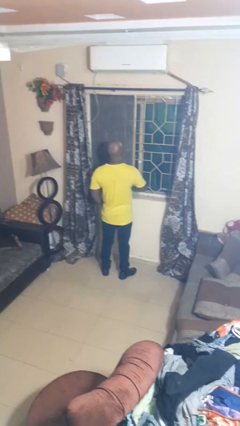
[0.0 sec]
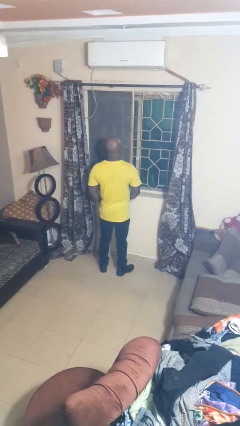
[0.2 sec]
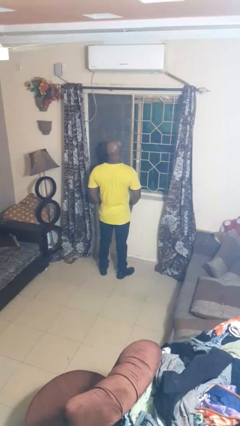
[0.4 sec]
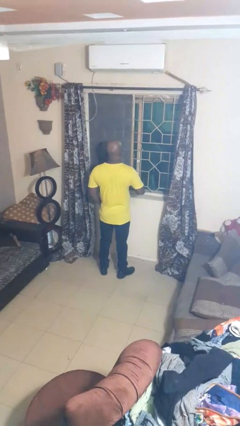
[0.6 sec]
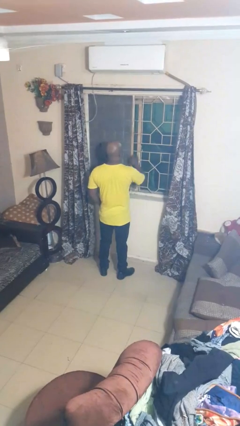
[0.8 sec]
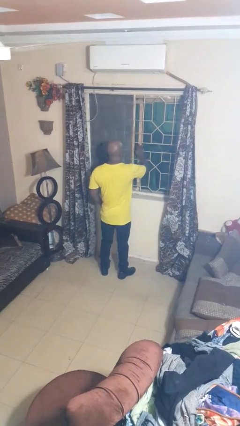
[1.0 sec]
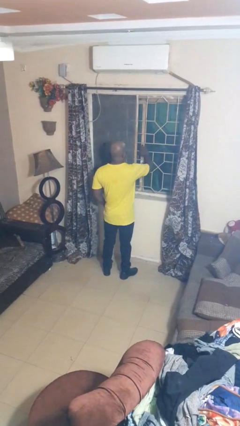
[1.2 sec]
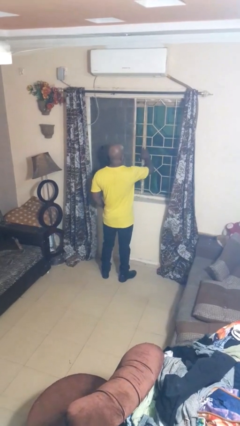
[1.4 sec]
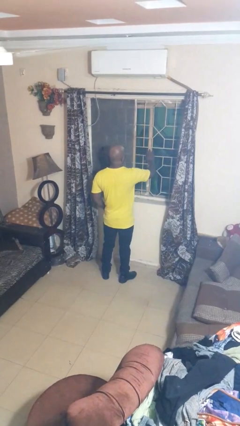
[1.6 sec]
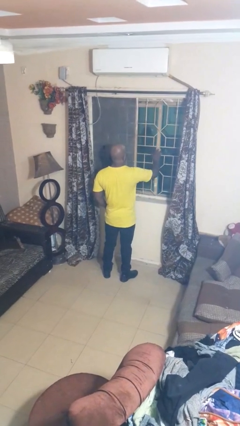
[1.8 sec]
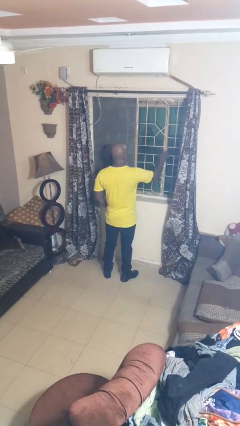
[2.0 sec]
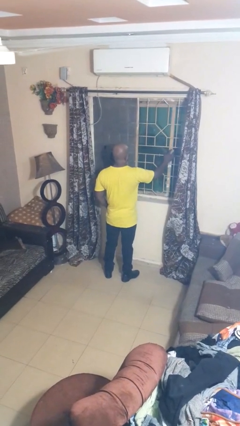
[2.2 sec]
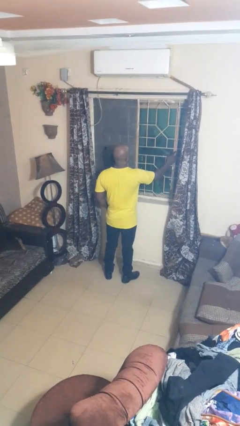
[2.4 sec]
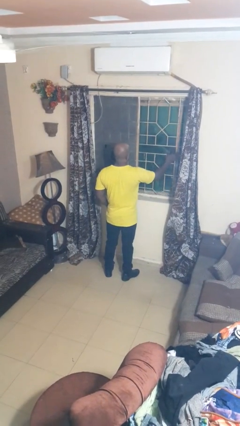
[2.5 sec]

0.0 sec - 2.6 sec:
person opens home window

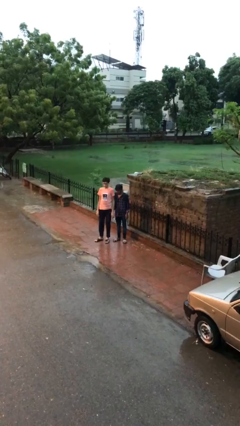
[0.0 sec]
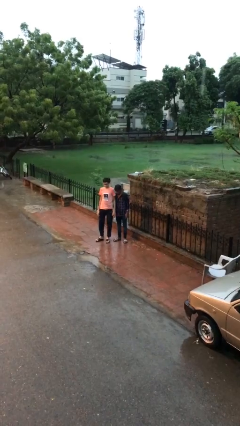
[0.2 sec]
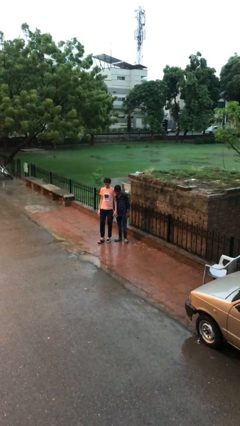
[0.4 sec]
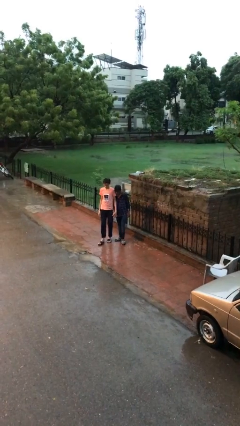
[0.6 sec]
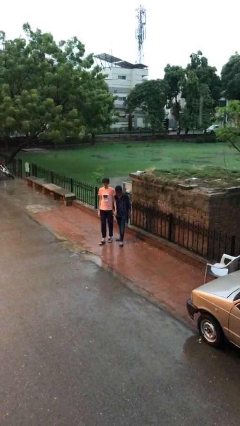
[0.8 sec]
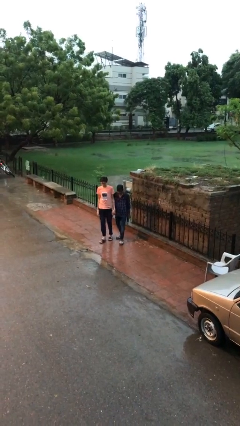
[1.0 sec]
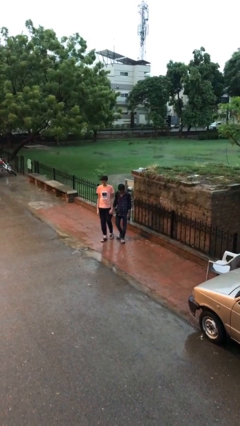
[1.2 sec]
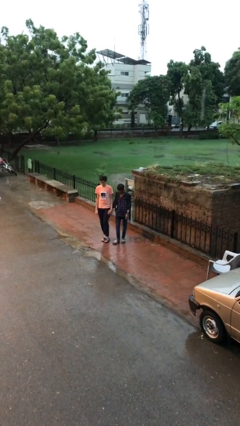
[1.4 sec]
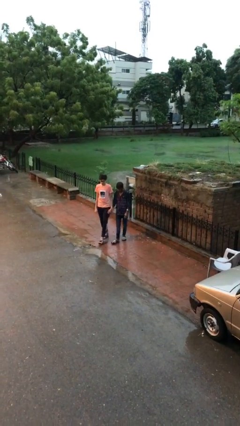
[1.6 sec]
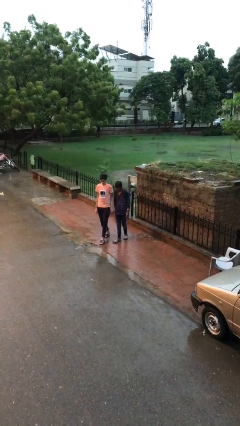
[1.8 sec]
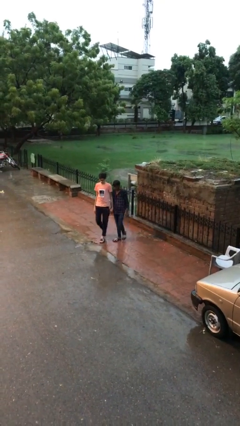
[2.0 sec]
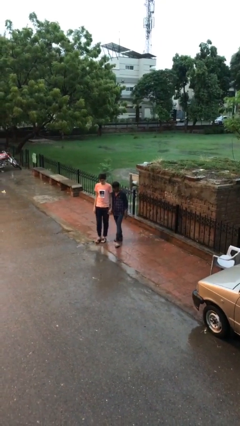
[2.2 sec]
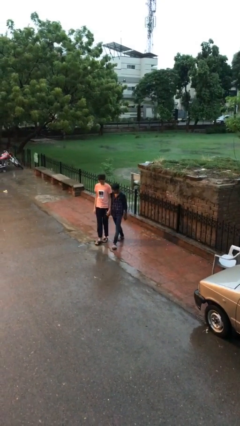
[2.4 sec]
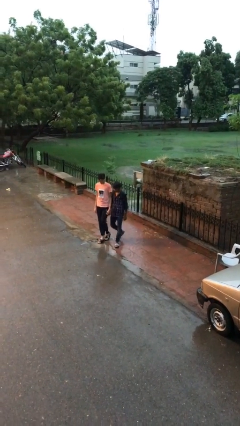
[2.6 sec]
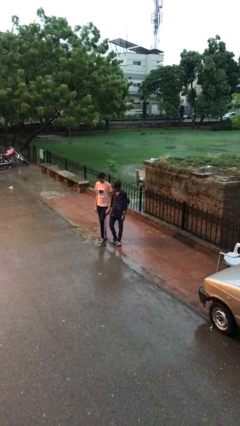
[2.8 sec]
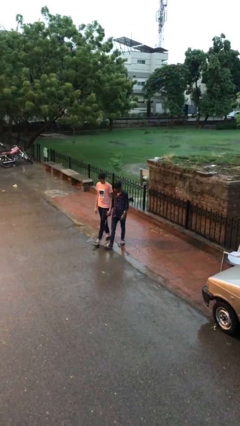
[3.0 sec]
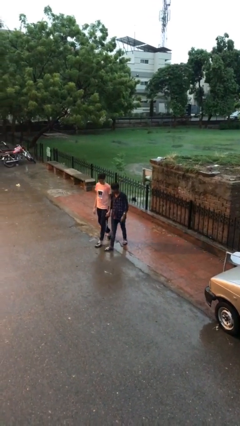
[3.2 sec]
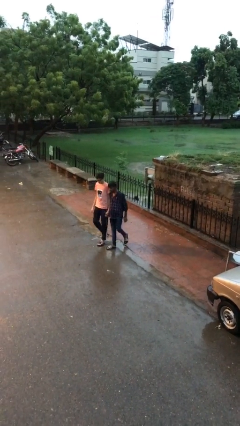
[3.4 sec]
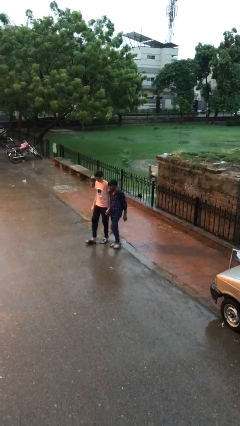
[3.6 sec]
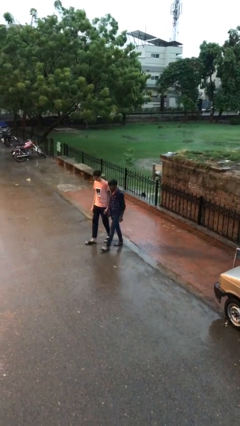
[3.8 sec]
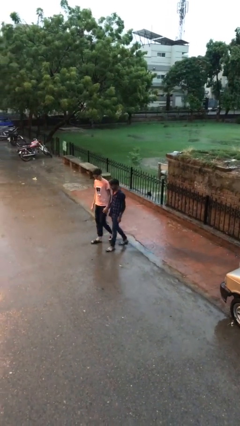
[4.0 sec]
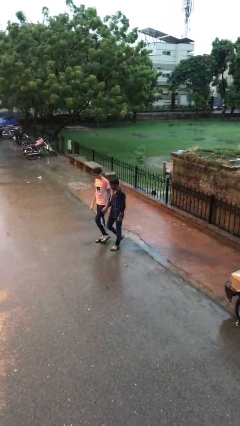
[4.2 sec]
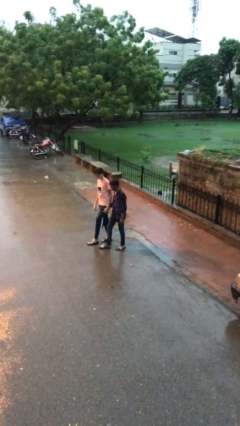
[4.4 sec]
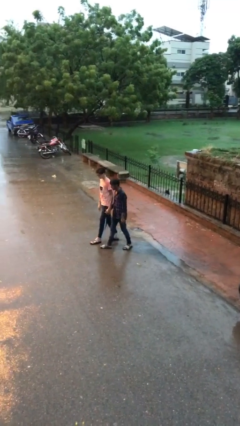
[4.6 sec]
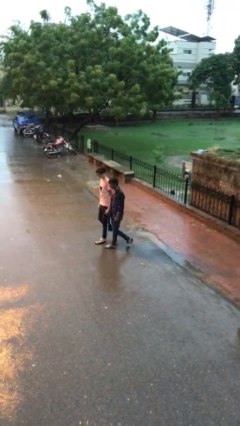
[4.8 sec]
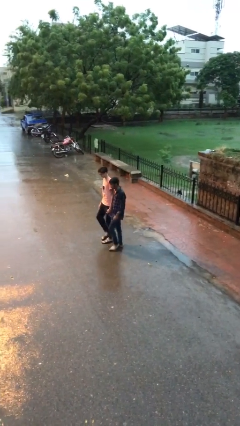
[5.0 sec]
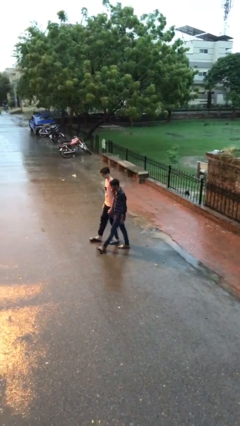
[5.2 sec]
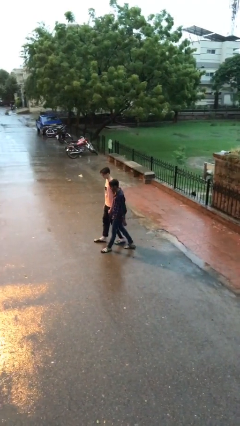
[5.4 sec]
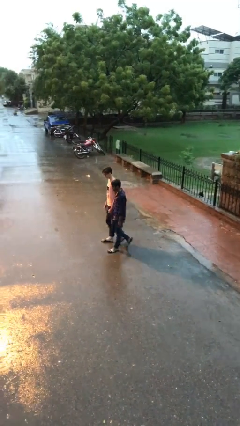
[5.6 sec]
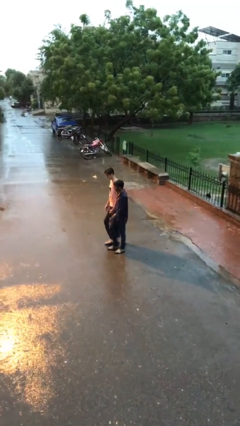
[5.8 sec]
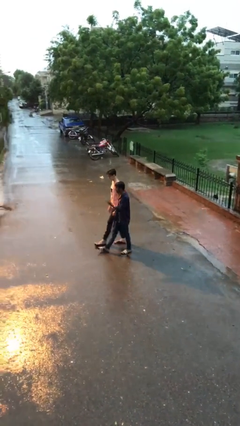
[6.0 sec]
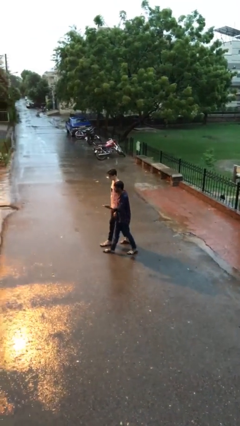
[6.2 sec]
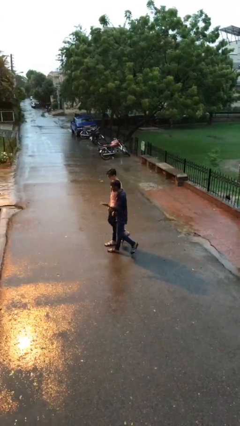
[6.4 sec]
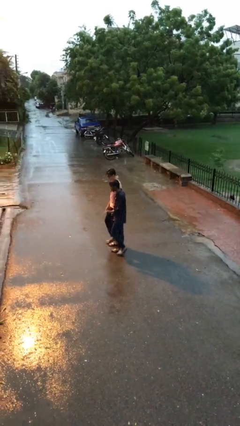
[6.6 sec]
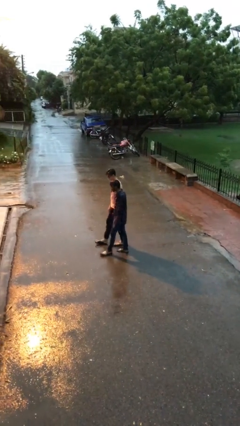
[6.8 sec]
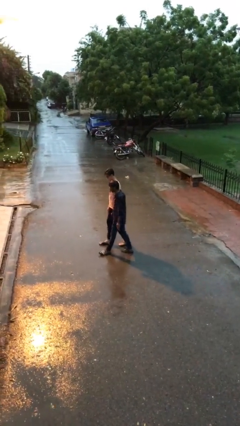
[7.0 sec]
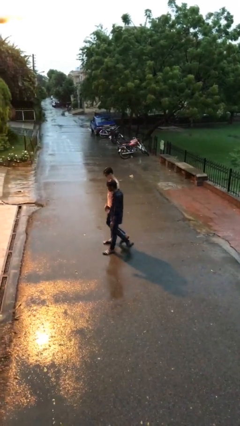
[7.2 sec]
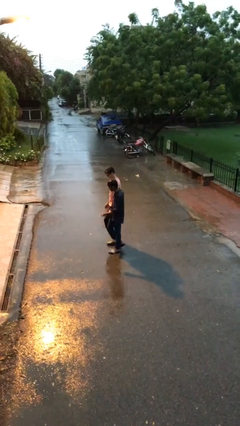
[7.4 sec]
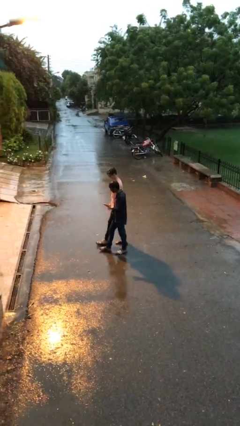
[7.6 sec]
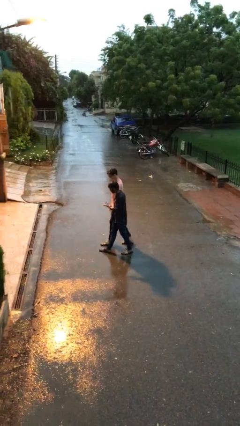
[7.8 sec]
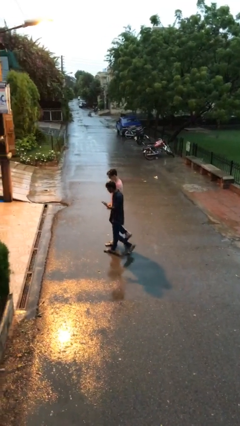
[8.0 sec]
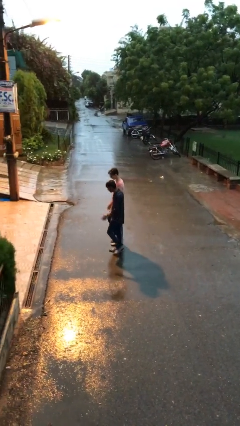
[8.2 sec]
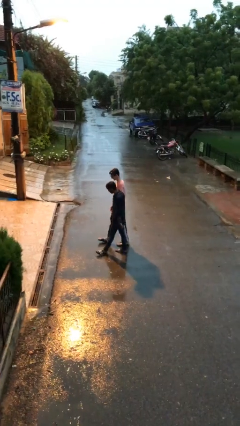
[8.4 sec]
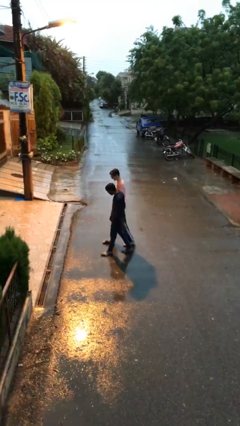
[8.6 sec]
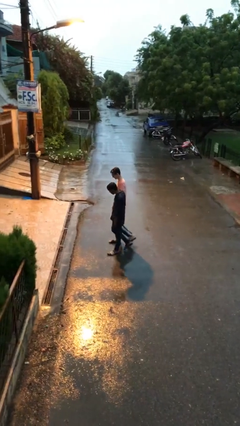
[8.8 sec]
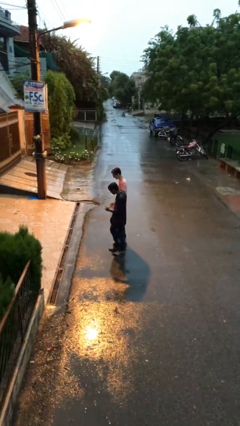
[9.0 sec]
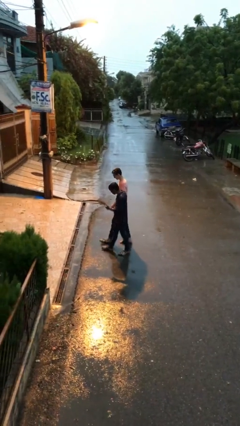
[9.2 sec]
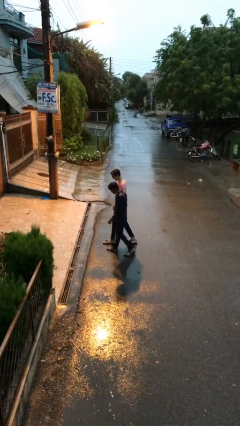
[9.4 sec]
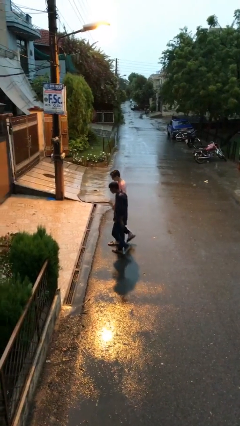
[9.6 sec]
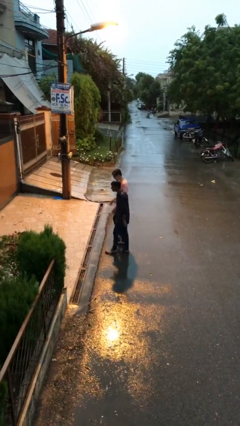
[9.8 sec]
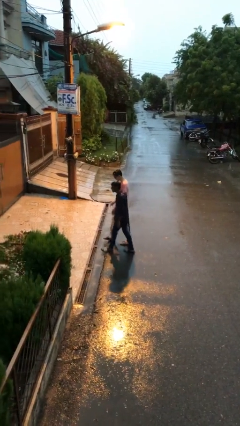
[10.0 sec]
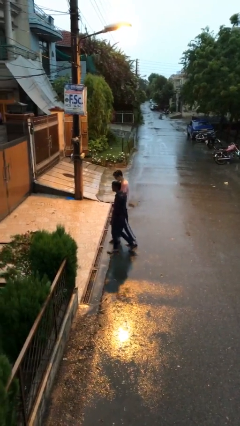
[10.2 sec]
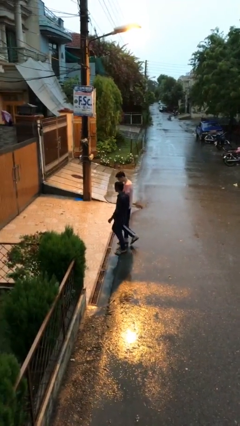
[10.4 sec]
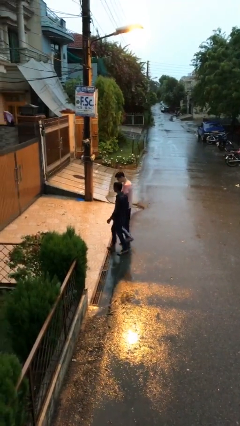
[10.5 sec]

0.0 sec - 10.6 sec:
person holds hand

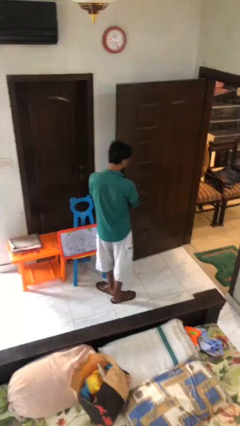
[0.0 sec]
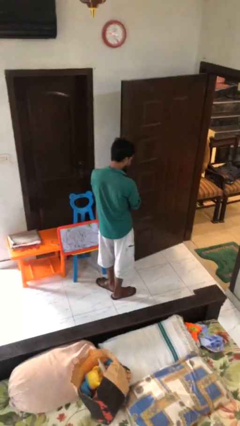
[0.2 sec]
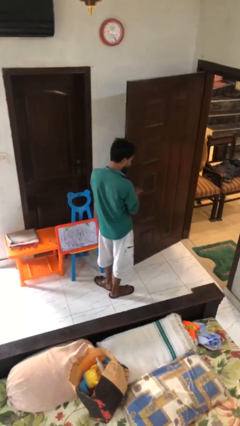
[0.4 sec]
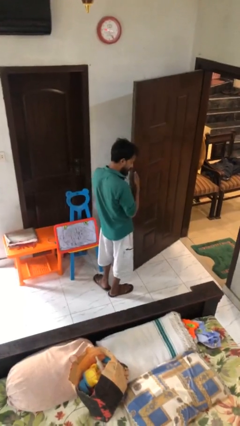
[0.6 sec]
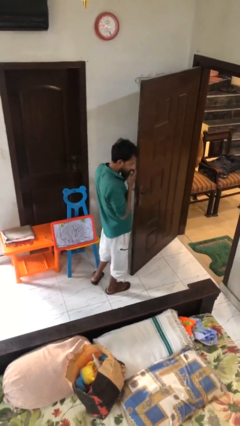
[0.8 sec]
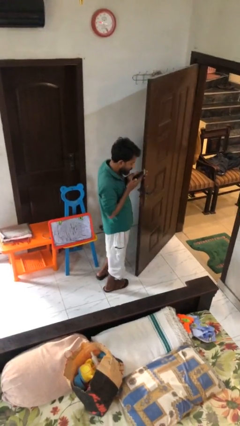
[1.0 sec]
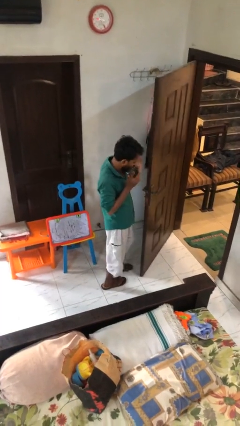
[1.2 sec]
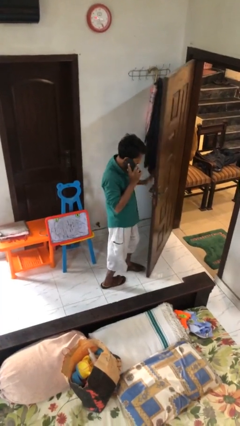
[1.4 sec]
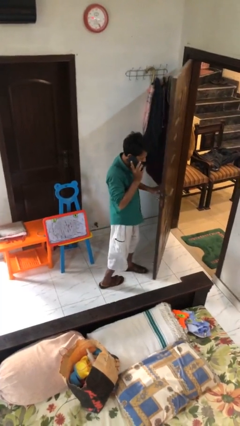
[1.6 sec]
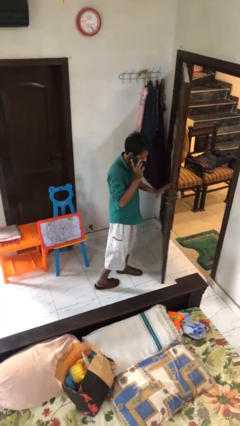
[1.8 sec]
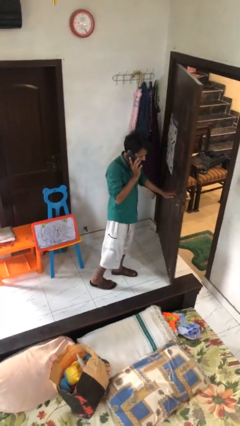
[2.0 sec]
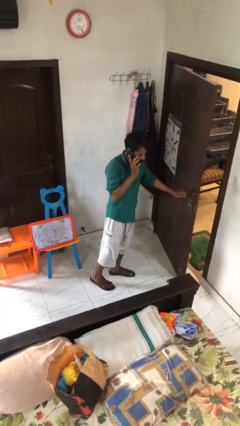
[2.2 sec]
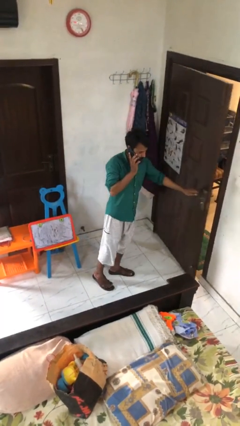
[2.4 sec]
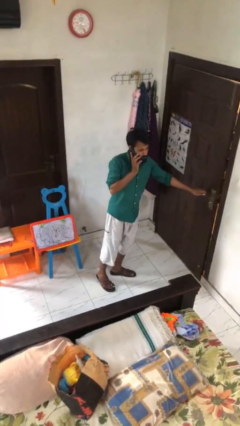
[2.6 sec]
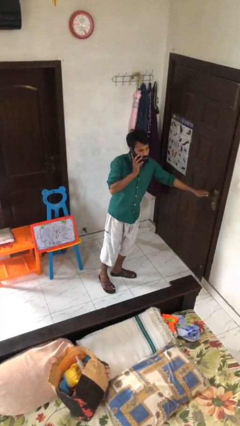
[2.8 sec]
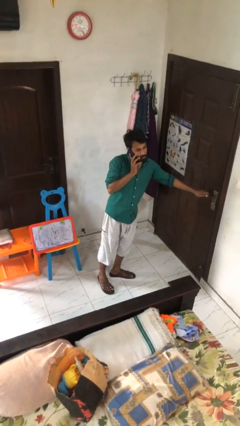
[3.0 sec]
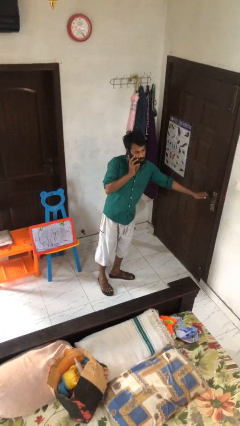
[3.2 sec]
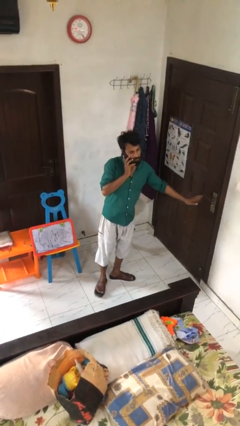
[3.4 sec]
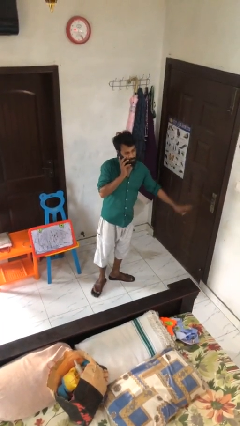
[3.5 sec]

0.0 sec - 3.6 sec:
person closes facility door

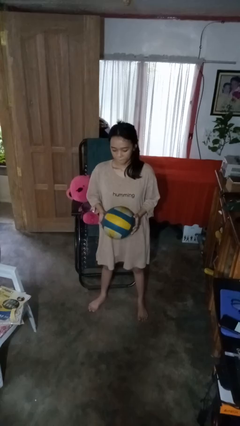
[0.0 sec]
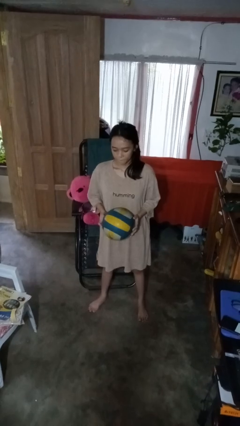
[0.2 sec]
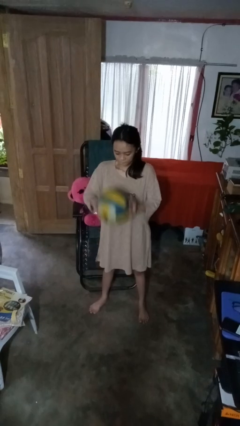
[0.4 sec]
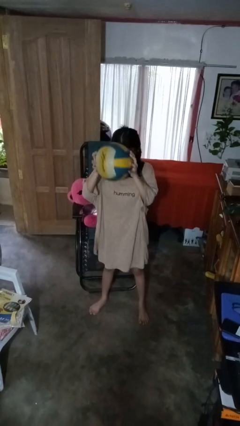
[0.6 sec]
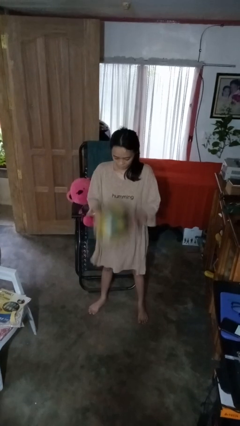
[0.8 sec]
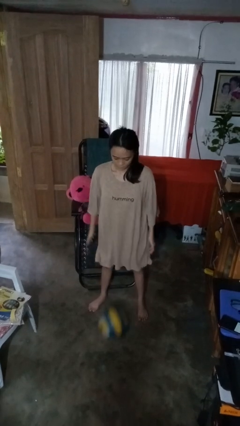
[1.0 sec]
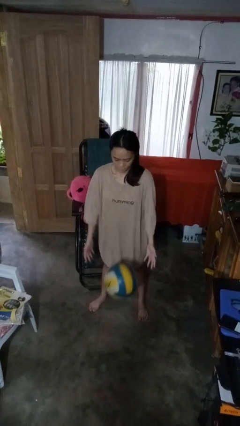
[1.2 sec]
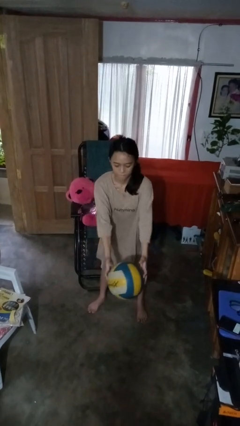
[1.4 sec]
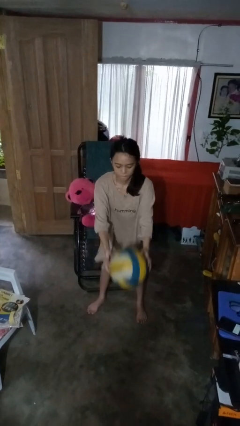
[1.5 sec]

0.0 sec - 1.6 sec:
person bounces ball on floor
